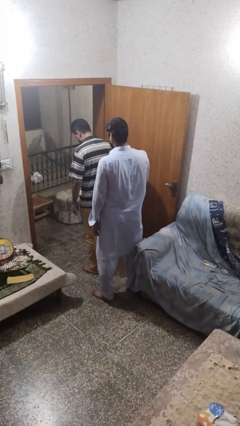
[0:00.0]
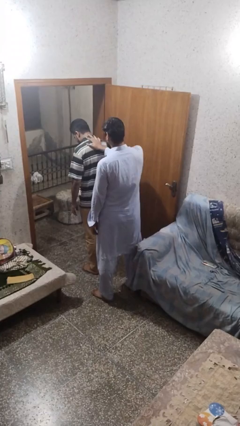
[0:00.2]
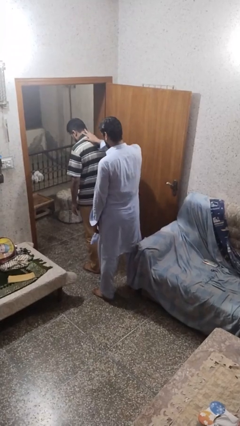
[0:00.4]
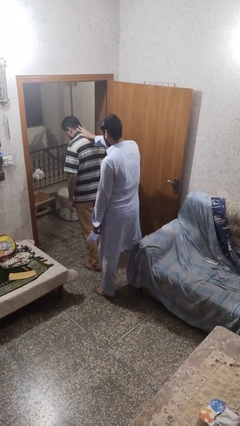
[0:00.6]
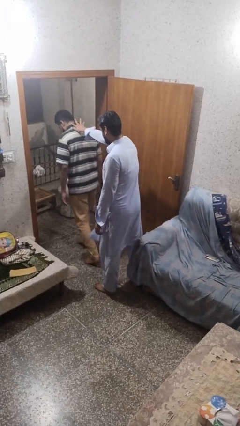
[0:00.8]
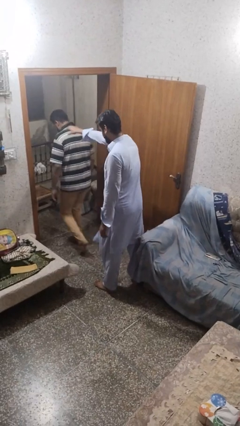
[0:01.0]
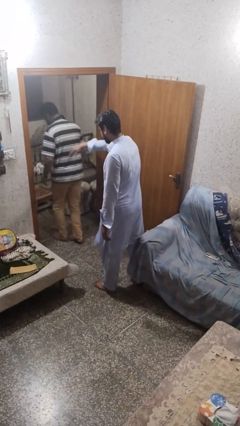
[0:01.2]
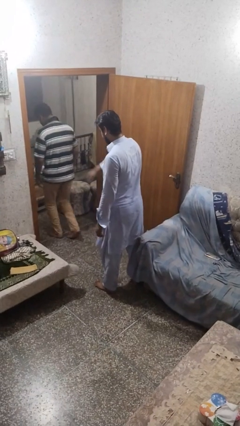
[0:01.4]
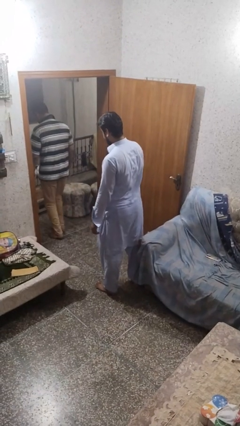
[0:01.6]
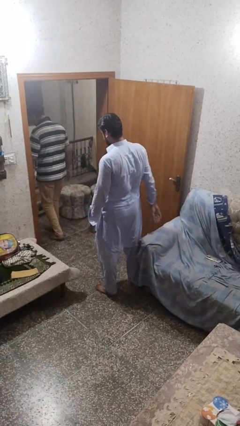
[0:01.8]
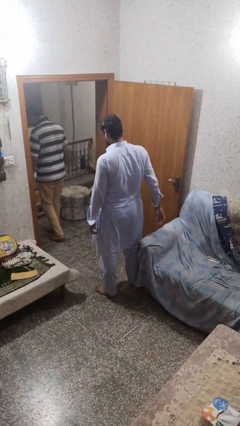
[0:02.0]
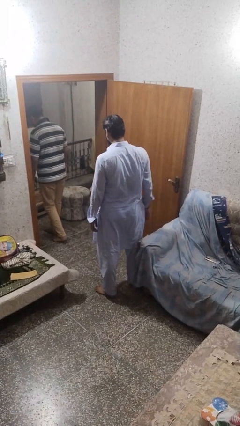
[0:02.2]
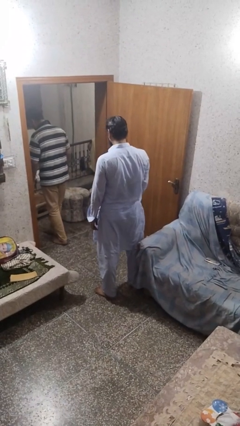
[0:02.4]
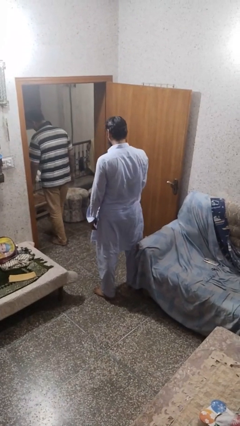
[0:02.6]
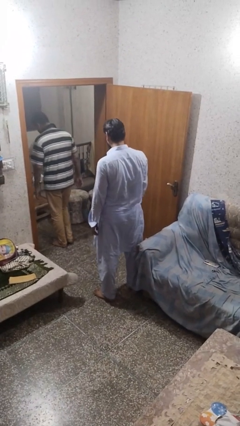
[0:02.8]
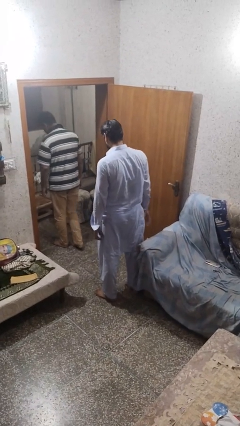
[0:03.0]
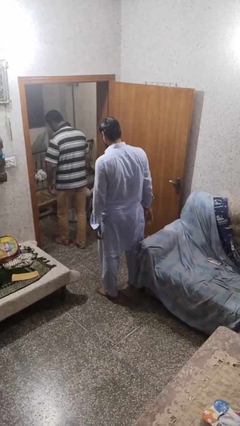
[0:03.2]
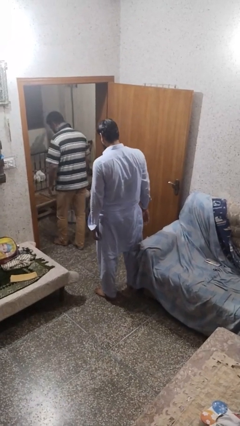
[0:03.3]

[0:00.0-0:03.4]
person shoves person

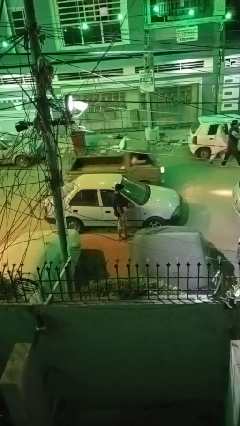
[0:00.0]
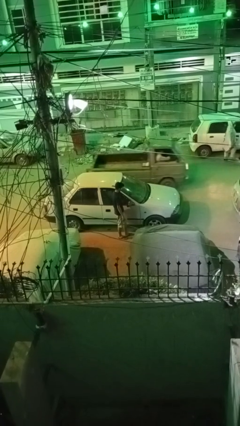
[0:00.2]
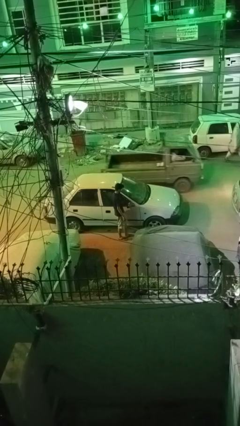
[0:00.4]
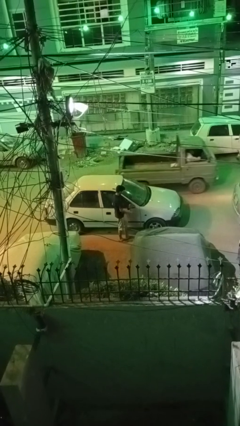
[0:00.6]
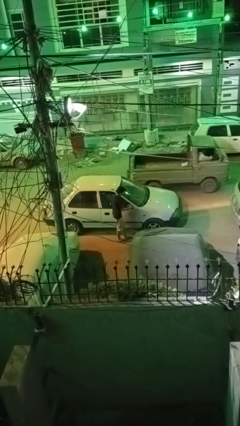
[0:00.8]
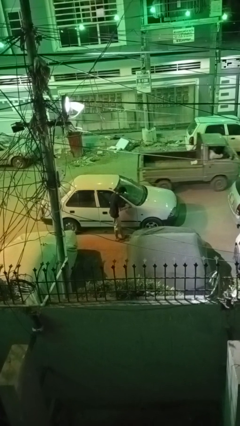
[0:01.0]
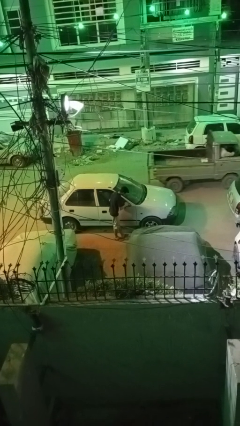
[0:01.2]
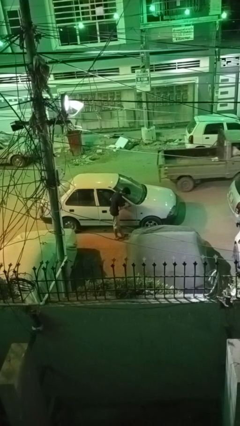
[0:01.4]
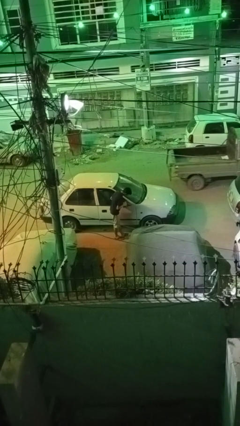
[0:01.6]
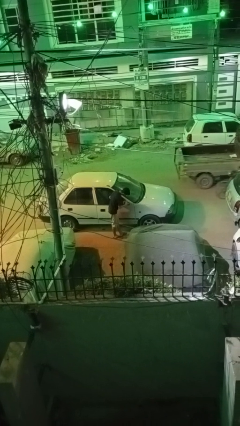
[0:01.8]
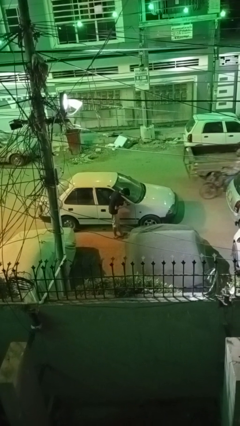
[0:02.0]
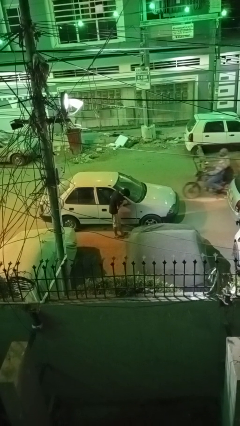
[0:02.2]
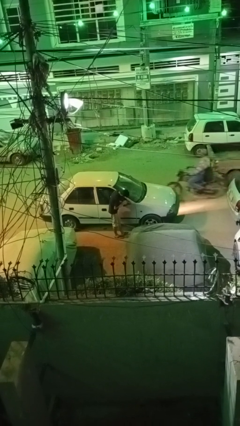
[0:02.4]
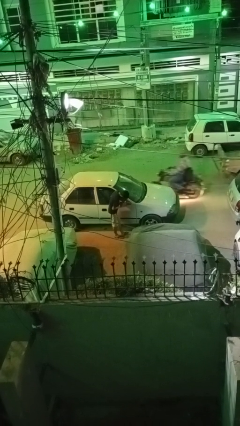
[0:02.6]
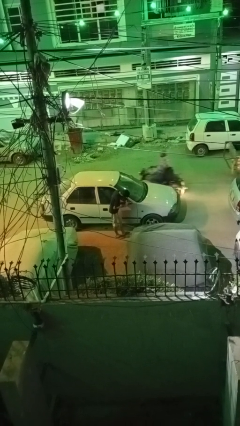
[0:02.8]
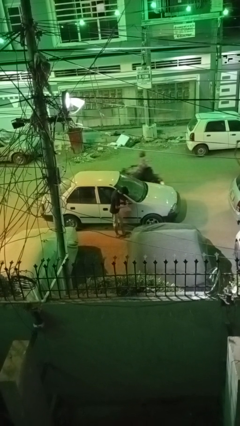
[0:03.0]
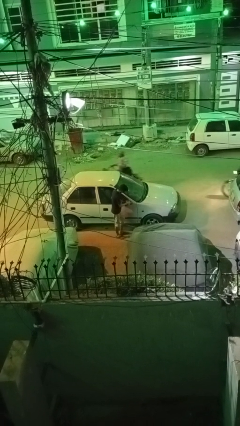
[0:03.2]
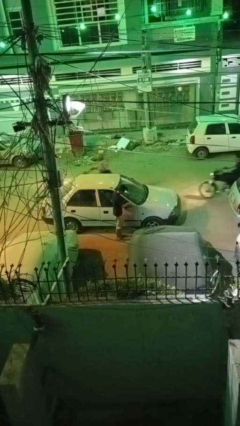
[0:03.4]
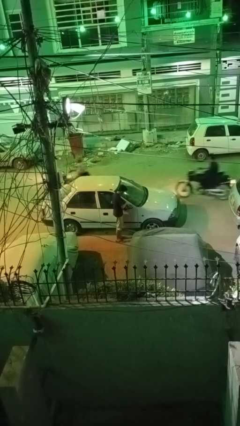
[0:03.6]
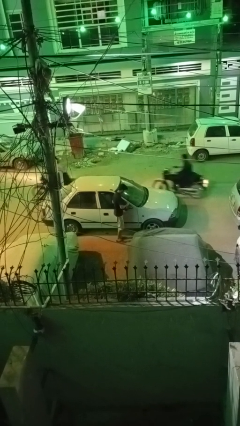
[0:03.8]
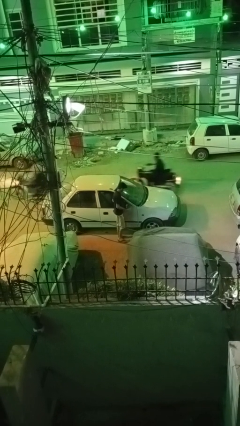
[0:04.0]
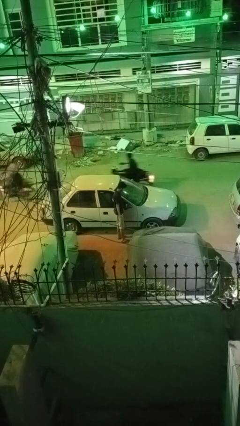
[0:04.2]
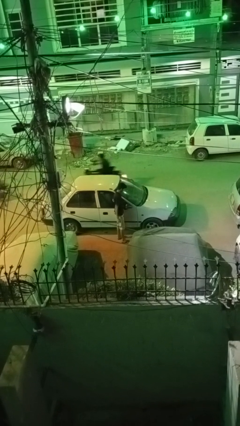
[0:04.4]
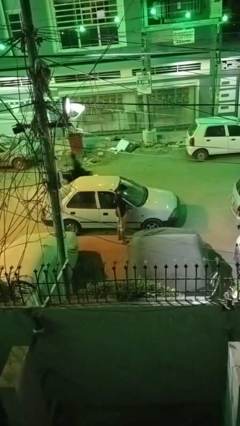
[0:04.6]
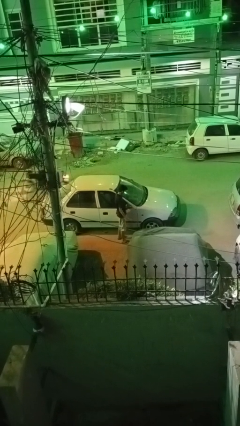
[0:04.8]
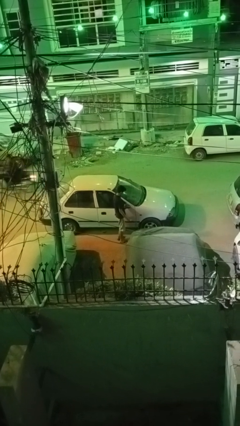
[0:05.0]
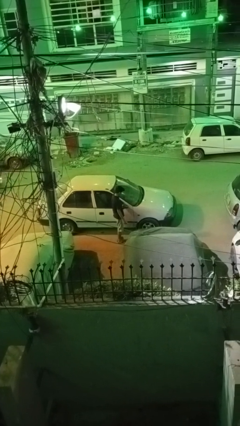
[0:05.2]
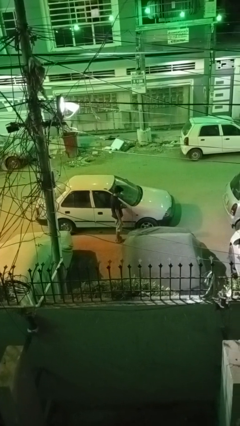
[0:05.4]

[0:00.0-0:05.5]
person polishes car with rag

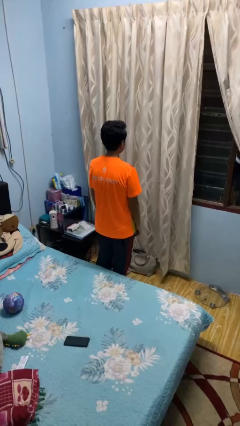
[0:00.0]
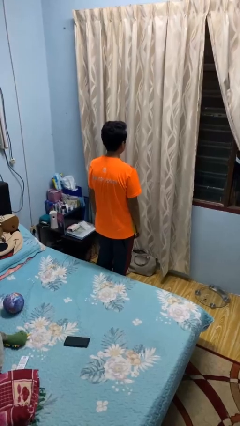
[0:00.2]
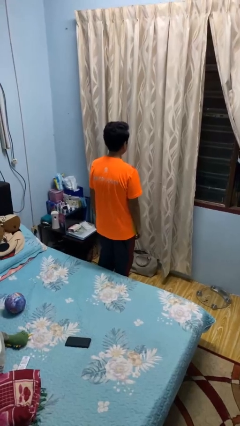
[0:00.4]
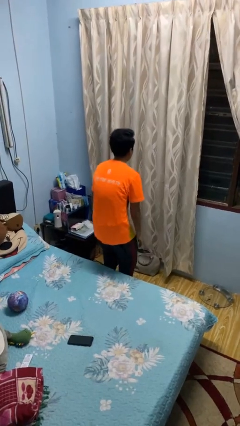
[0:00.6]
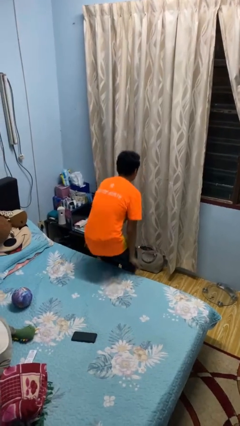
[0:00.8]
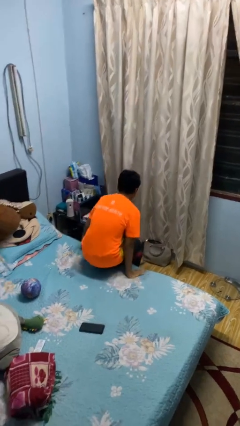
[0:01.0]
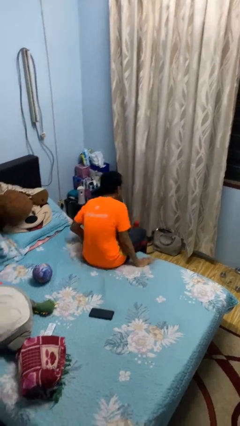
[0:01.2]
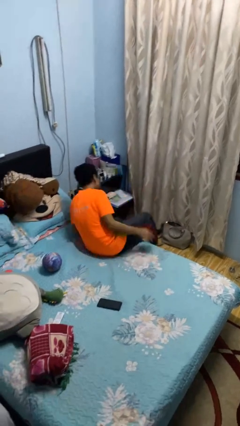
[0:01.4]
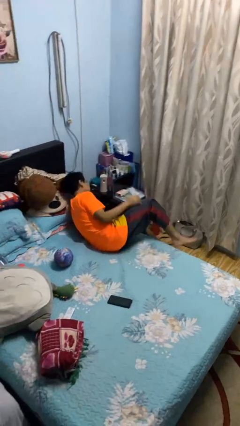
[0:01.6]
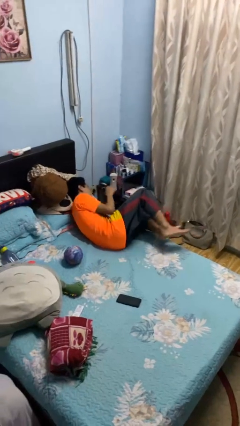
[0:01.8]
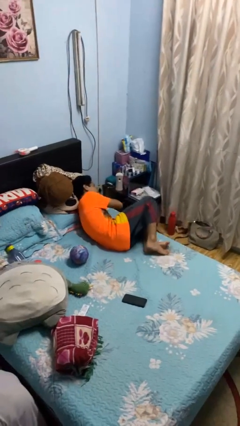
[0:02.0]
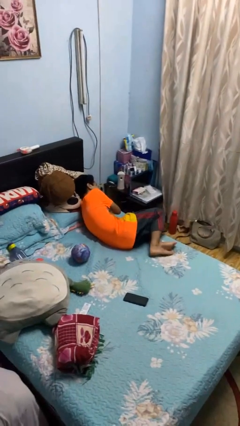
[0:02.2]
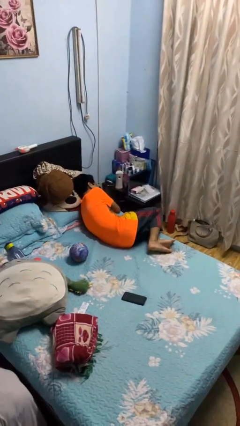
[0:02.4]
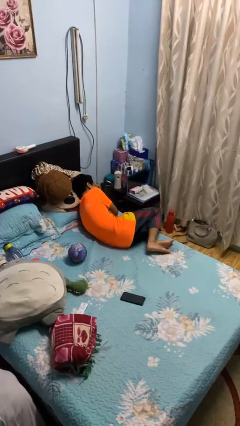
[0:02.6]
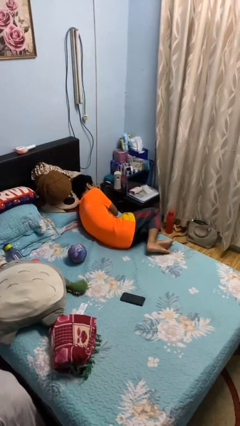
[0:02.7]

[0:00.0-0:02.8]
person lies down on bed

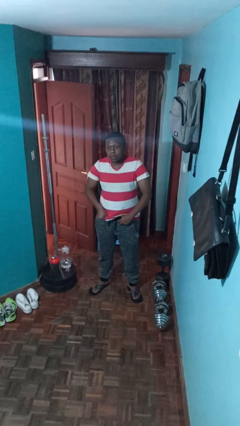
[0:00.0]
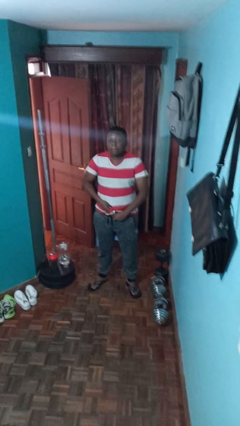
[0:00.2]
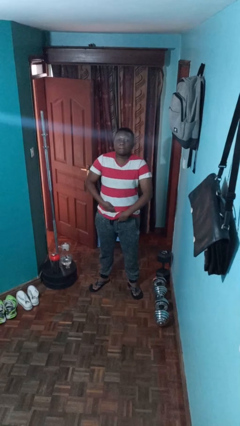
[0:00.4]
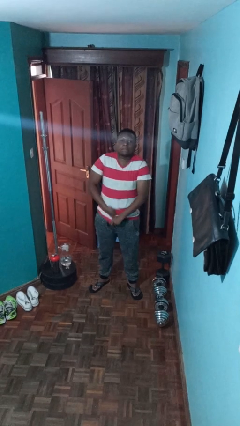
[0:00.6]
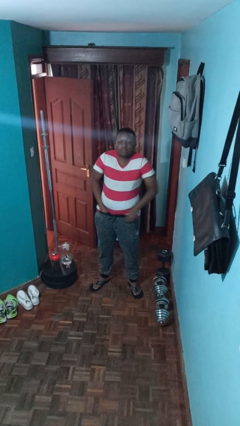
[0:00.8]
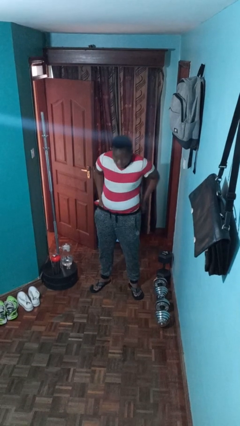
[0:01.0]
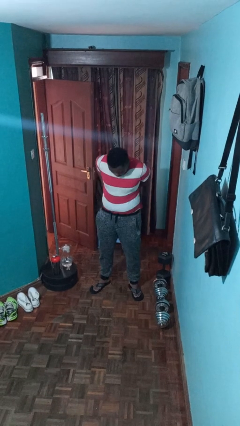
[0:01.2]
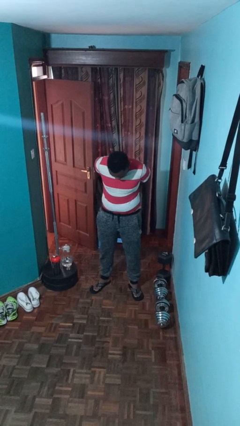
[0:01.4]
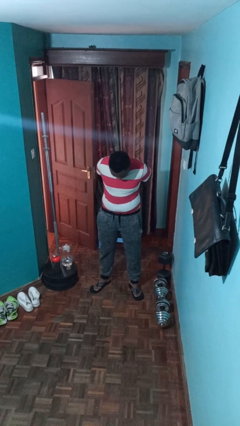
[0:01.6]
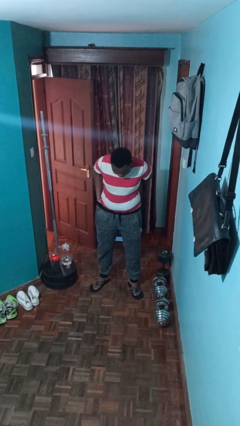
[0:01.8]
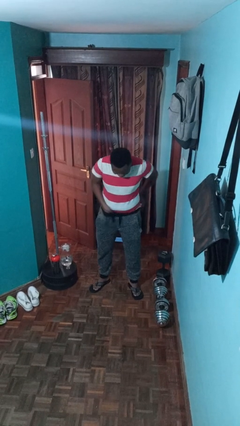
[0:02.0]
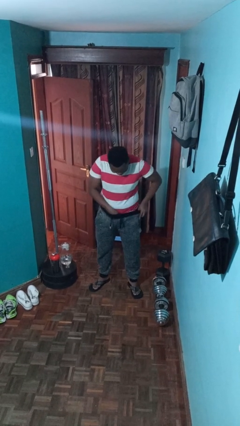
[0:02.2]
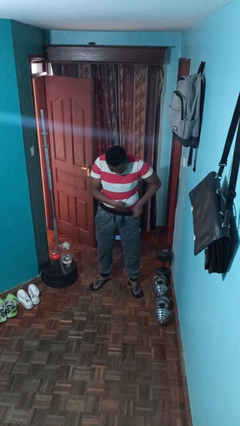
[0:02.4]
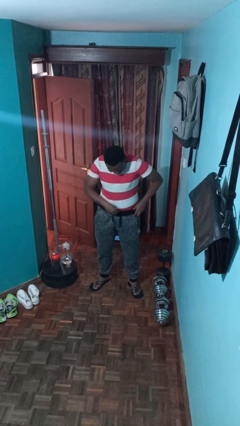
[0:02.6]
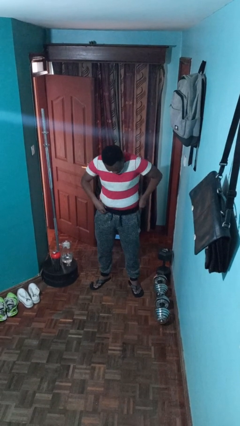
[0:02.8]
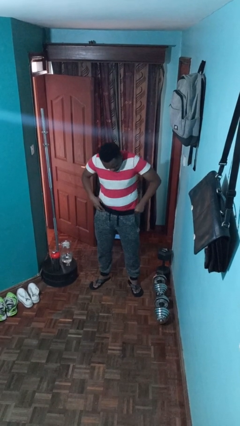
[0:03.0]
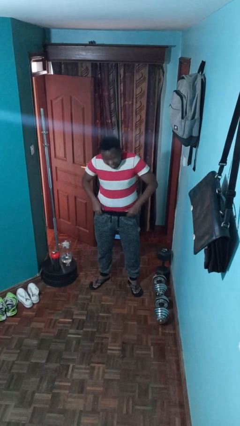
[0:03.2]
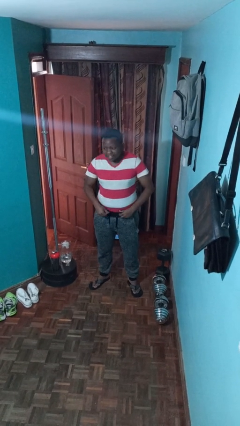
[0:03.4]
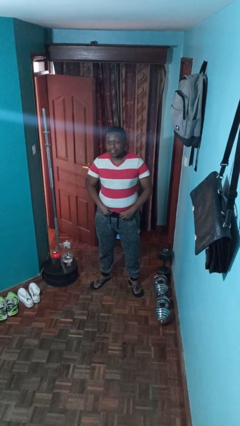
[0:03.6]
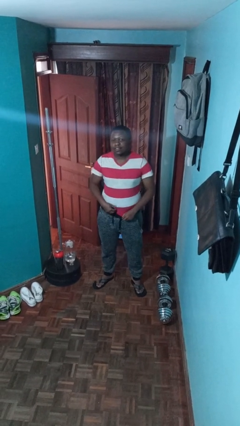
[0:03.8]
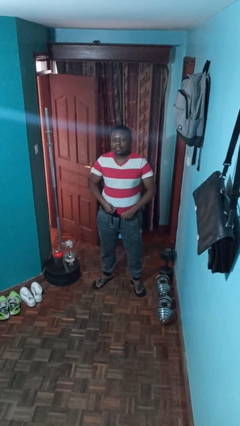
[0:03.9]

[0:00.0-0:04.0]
person tucks in shirt

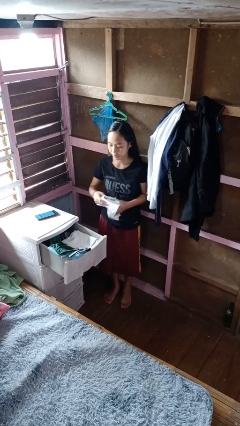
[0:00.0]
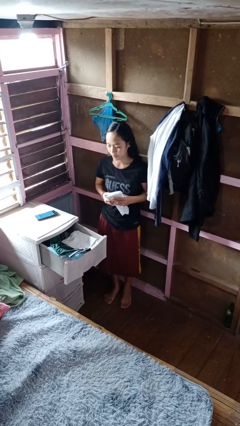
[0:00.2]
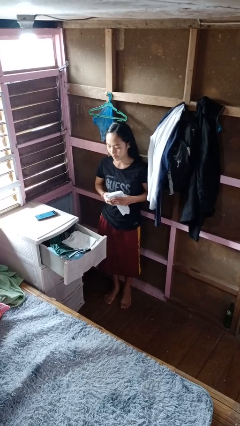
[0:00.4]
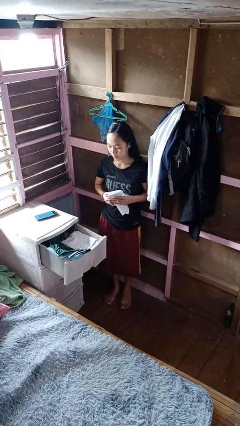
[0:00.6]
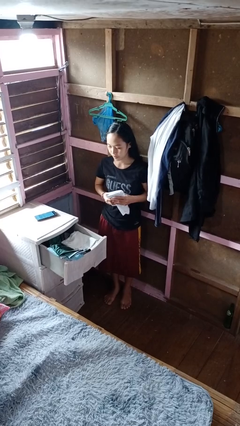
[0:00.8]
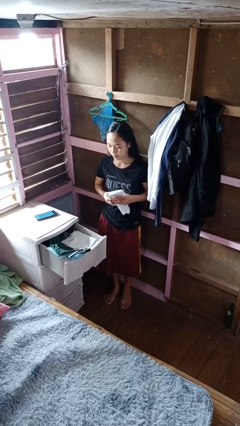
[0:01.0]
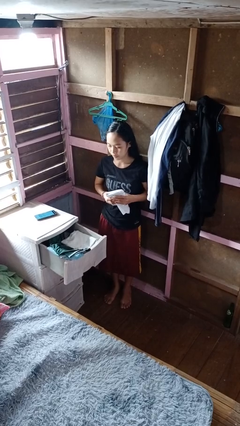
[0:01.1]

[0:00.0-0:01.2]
person takes clothes from dresser

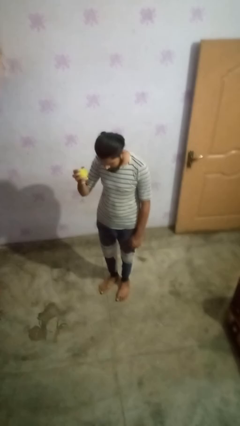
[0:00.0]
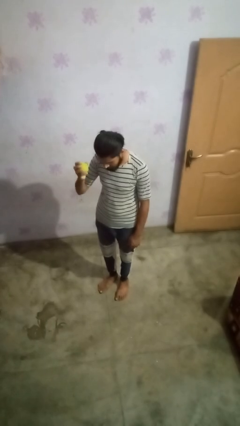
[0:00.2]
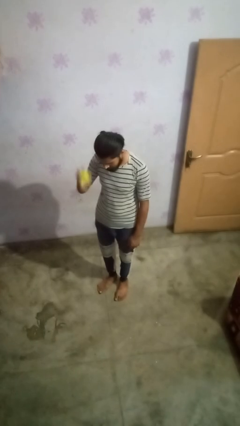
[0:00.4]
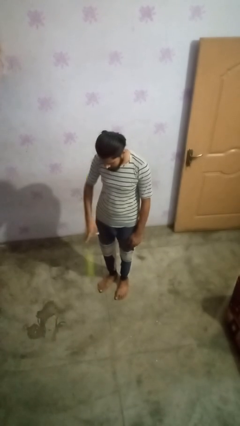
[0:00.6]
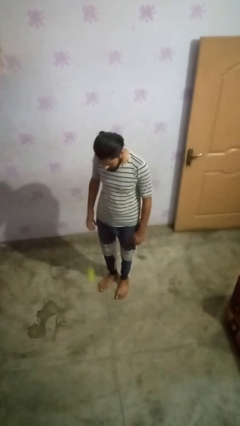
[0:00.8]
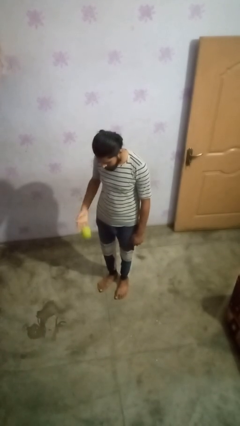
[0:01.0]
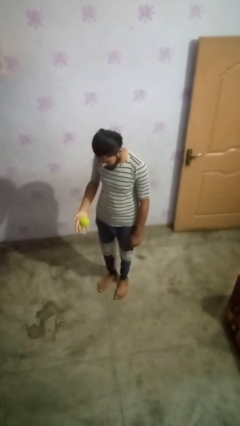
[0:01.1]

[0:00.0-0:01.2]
person bounces ball on floor
